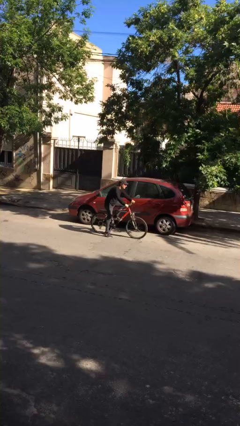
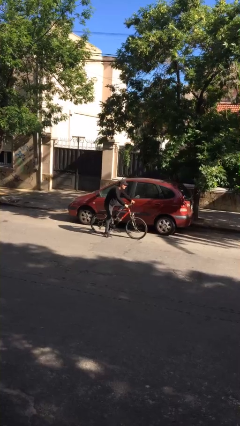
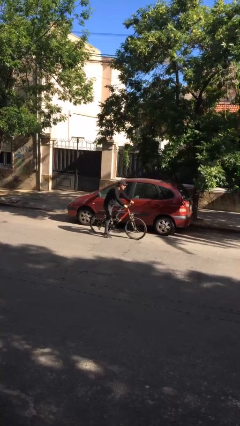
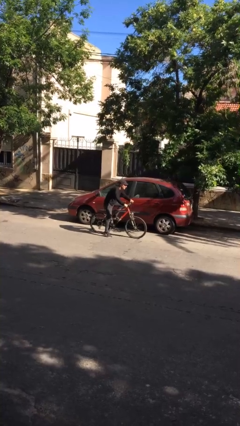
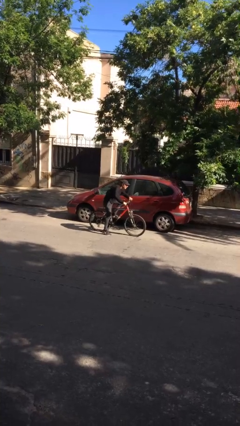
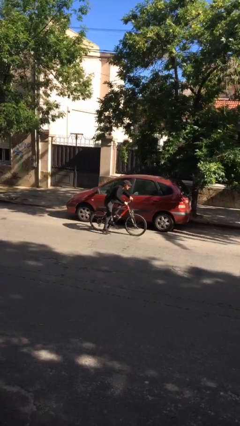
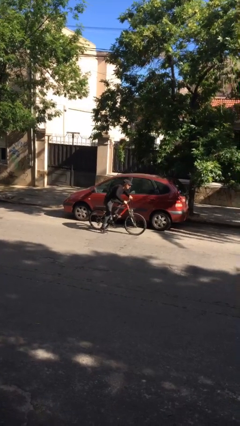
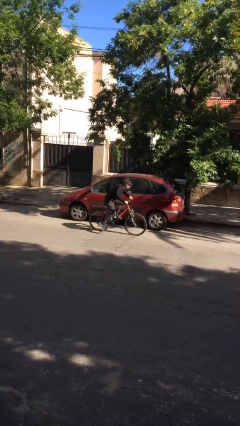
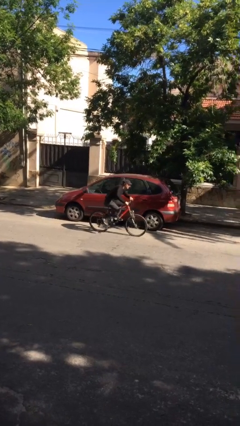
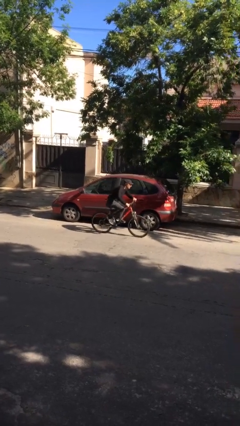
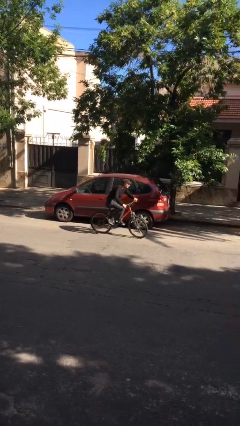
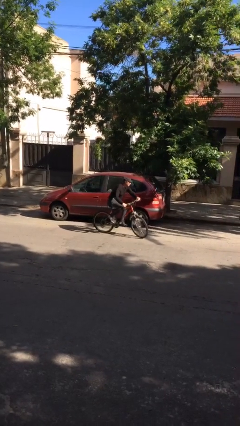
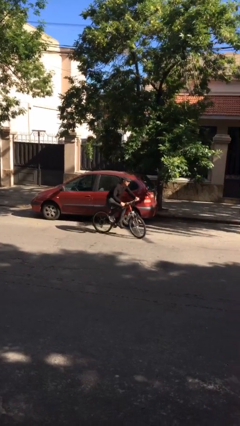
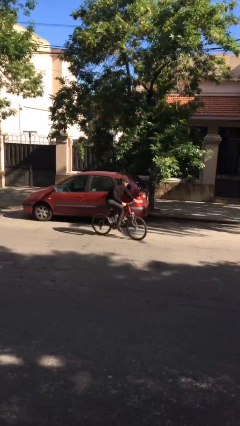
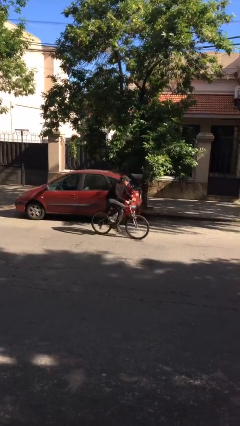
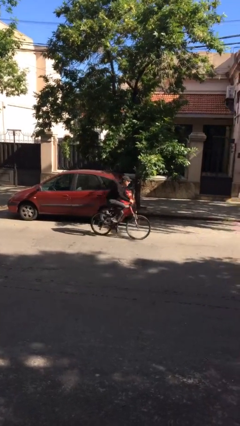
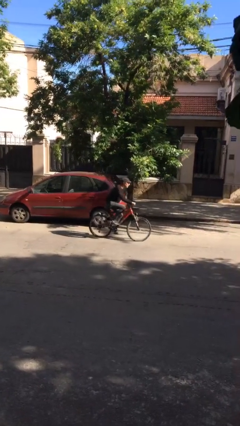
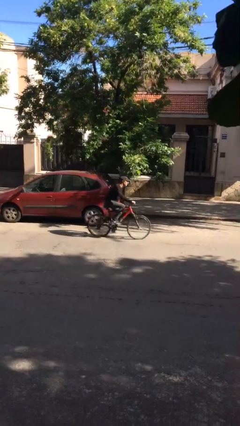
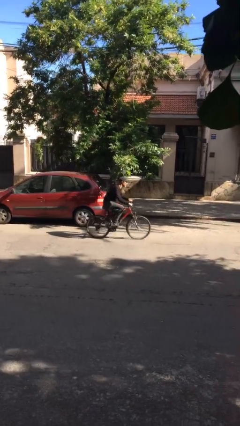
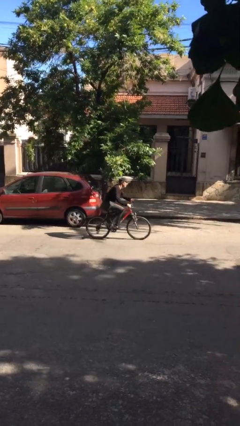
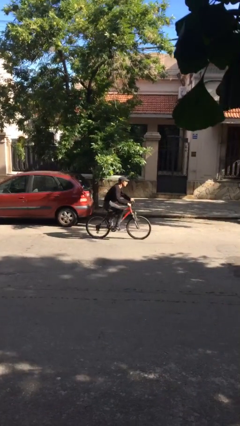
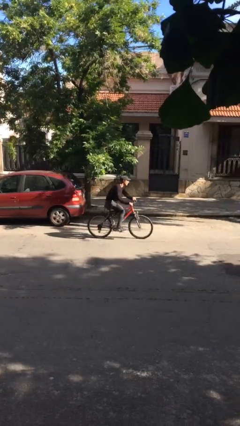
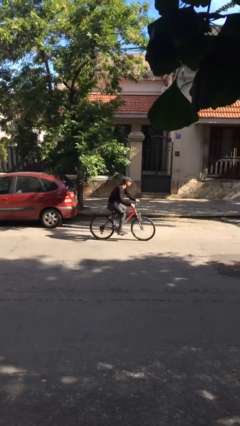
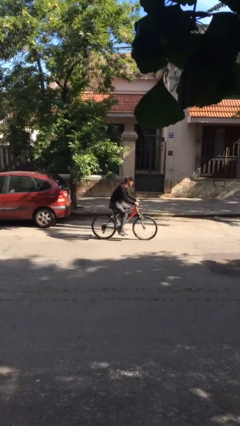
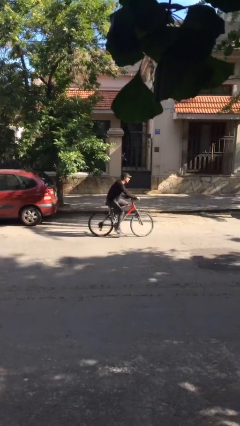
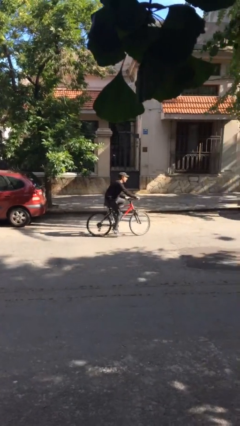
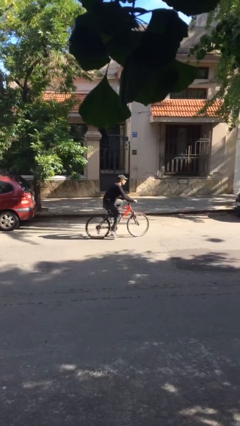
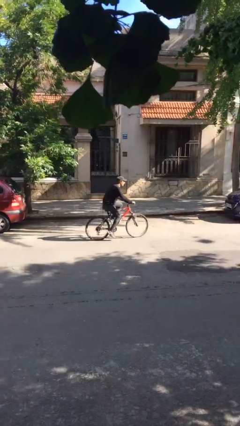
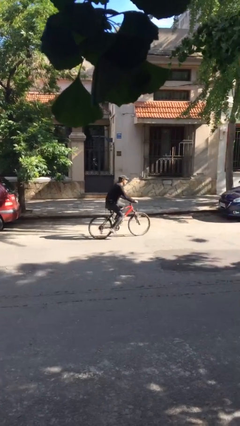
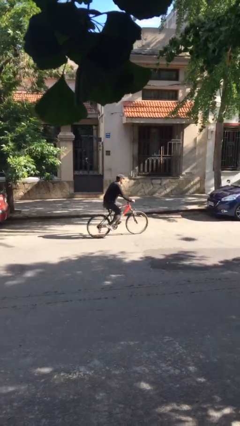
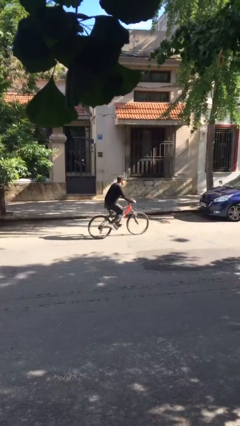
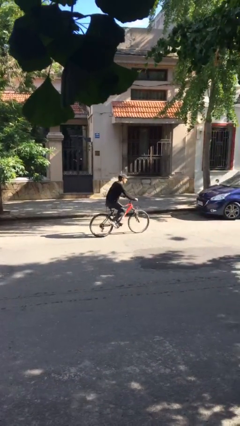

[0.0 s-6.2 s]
person rides bicycle

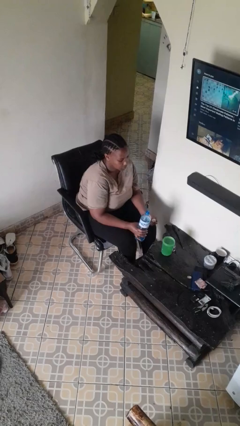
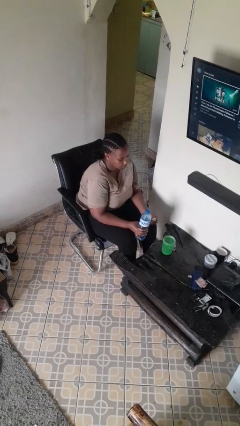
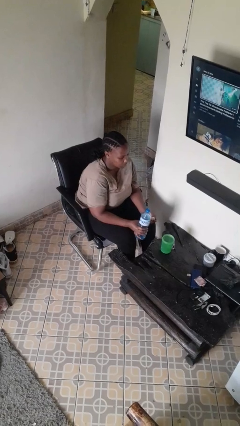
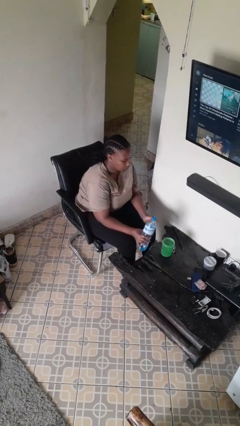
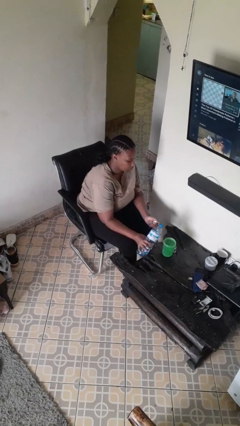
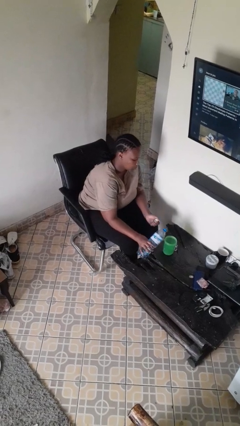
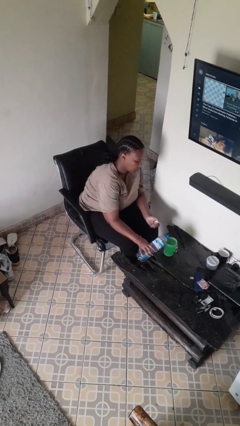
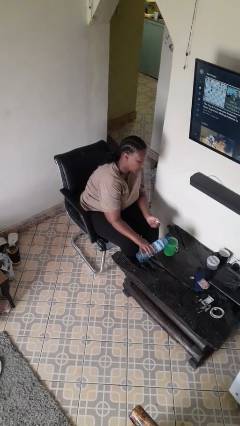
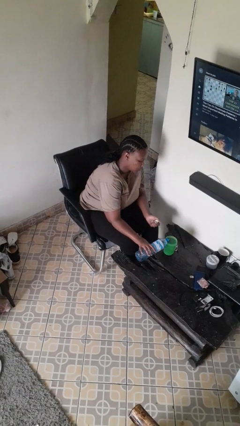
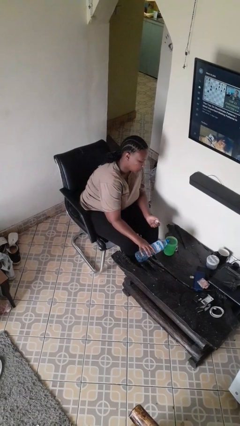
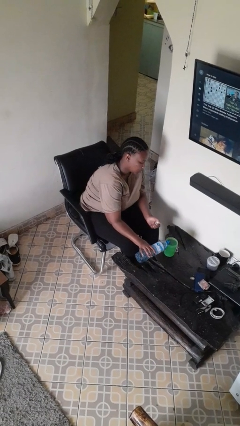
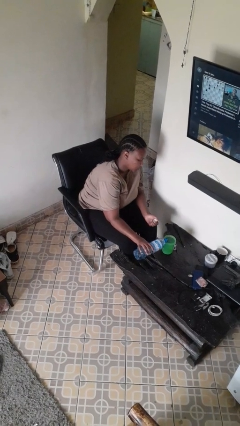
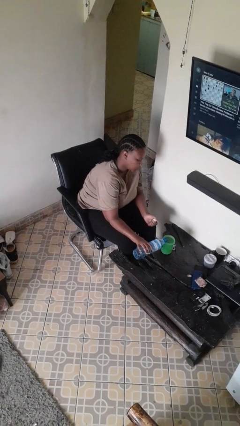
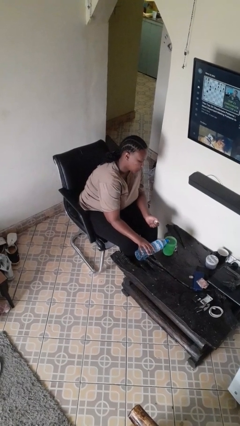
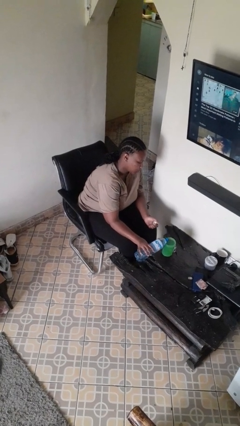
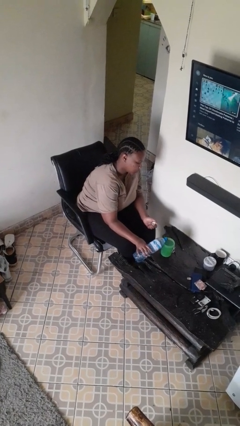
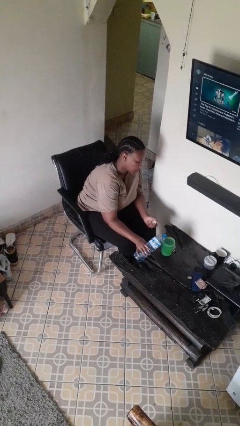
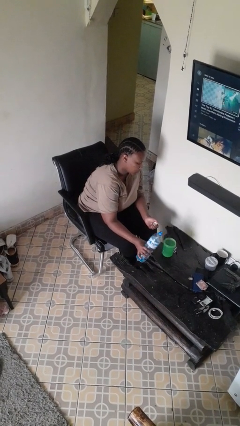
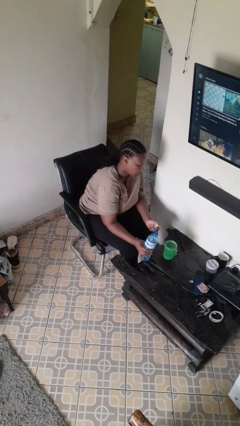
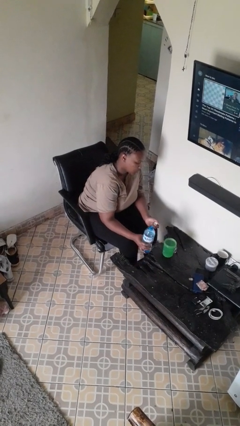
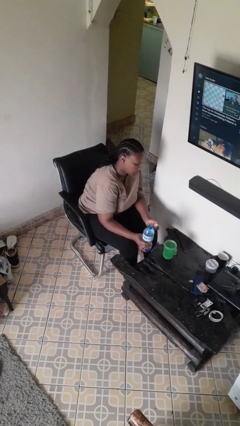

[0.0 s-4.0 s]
person pours liquid into cup

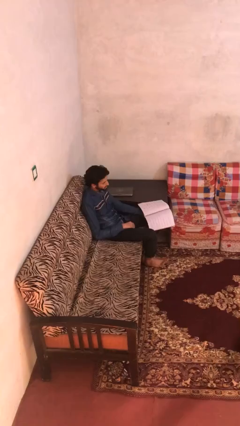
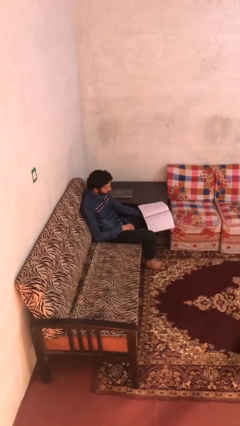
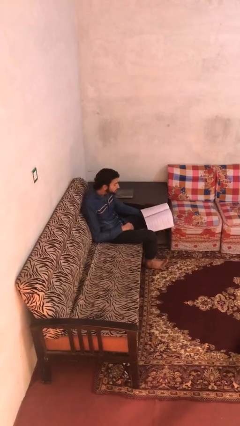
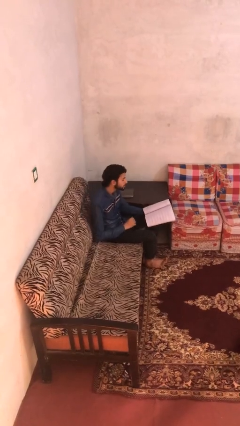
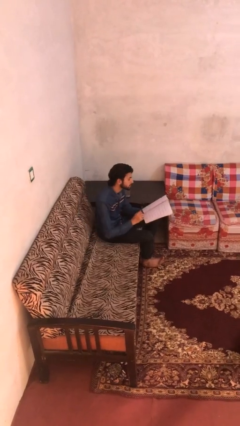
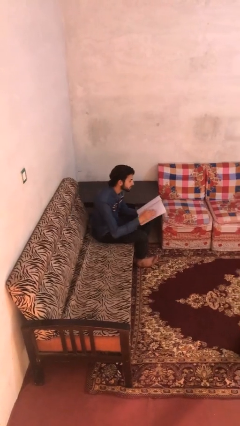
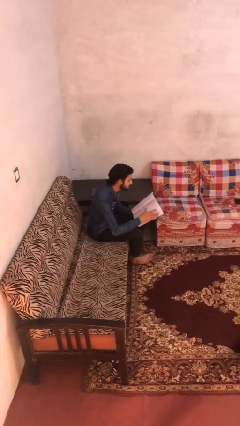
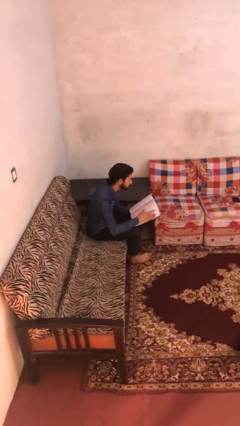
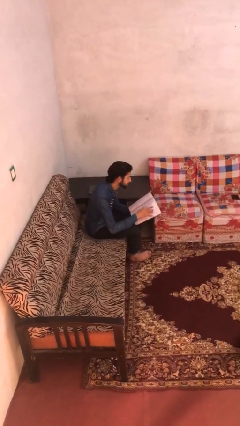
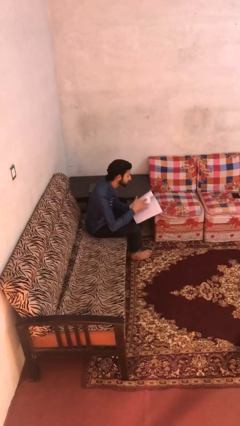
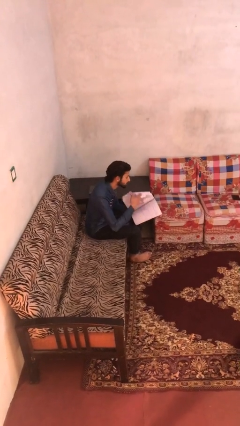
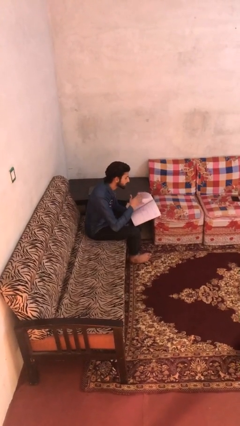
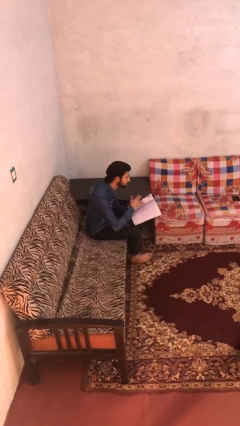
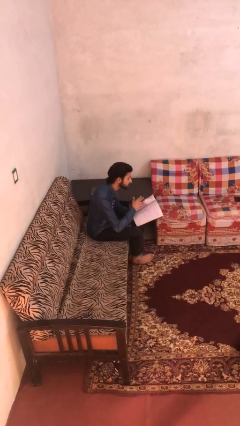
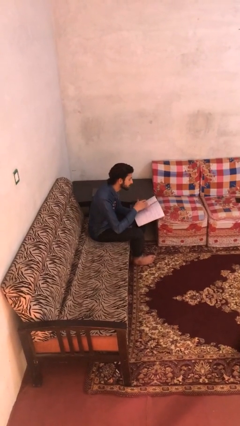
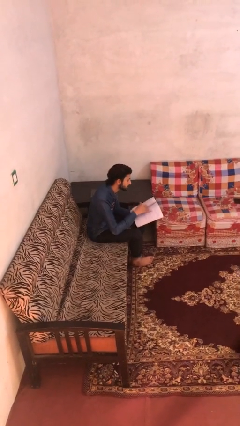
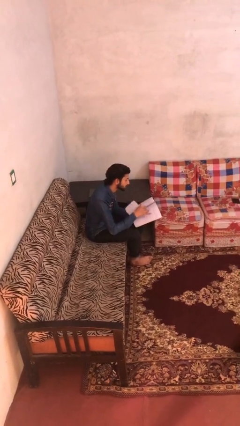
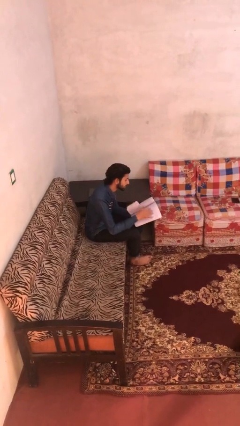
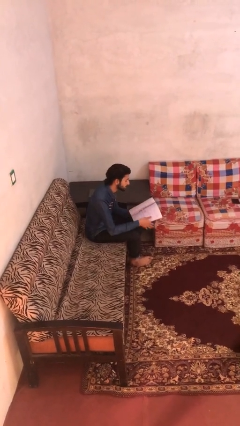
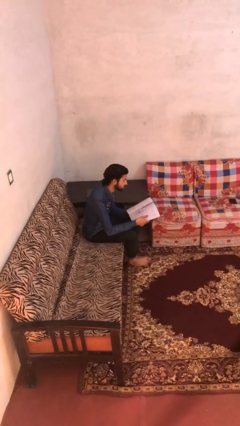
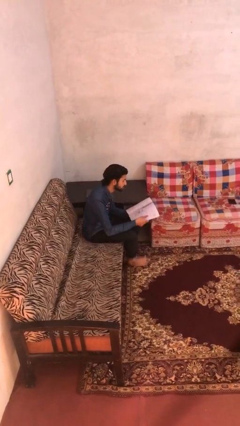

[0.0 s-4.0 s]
person reads document

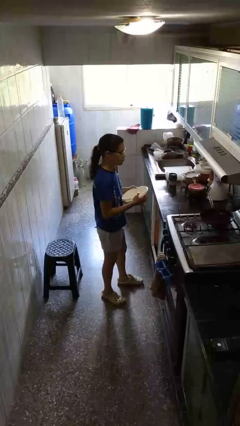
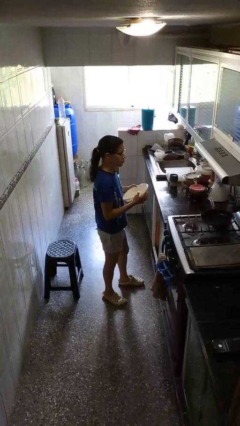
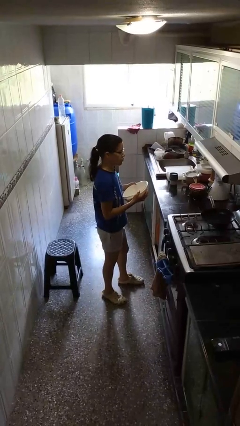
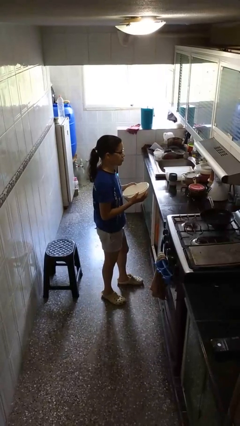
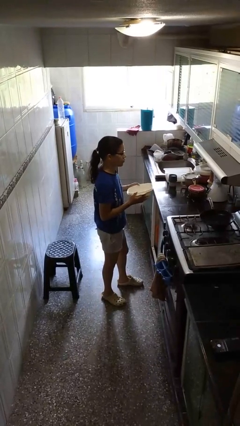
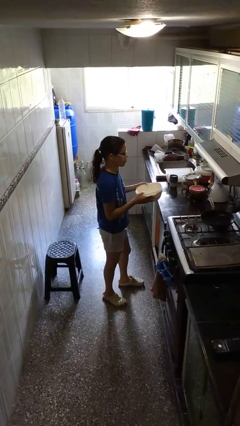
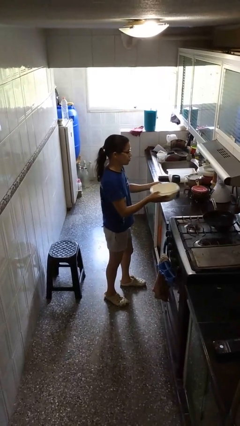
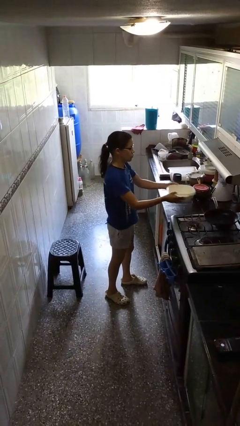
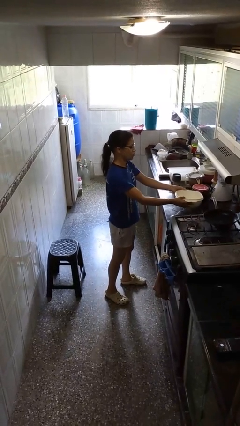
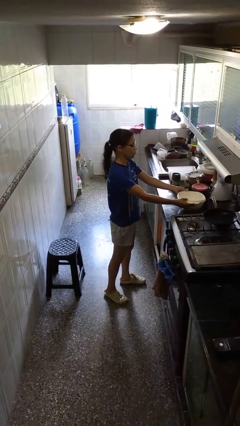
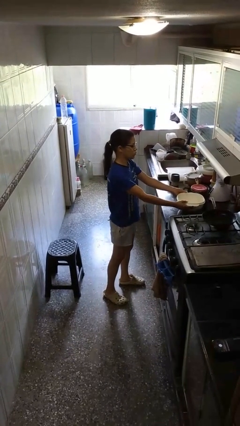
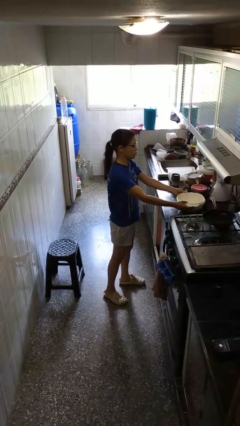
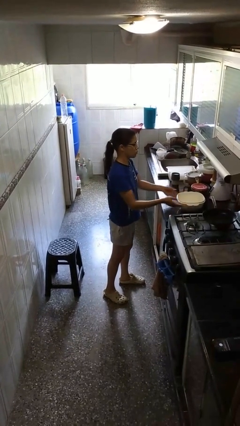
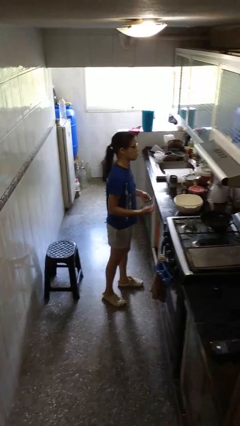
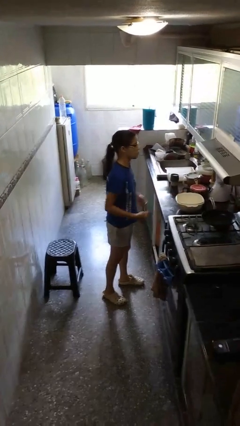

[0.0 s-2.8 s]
person puts down object on countertop

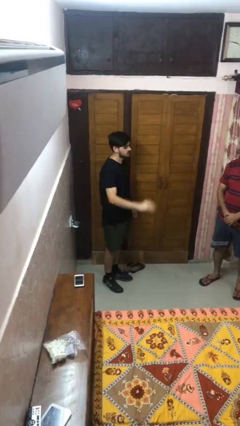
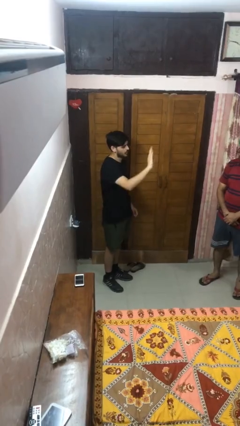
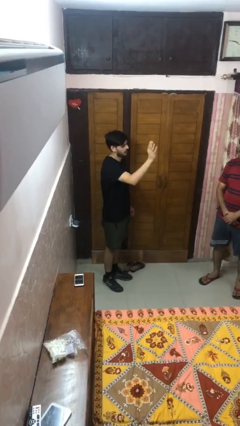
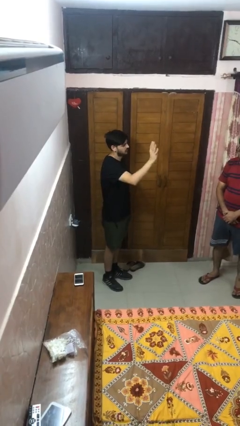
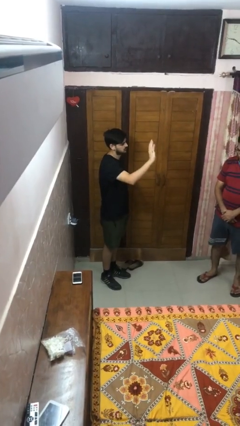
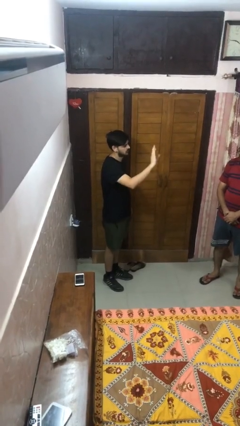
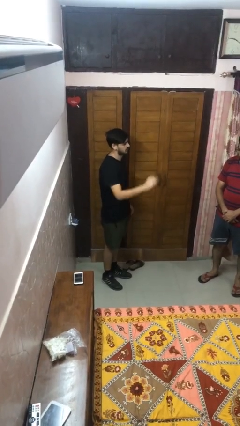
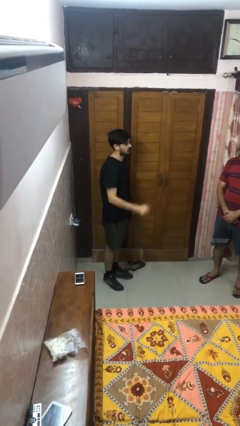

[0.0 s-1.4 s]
person waves at person
